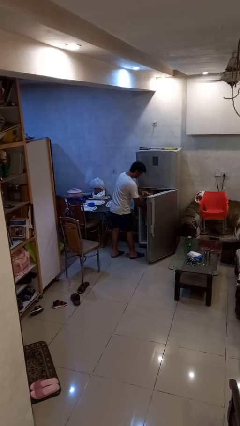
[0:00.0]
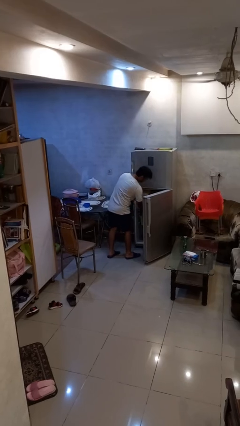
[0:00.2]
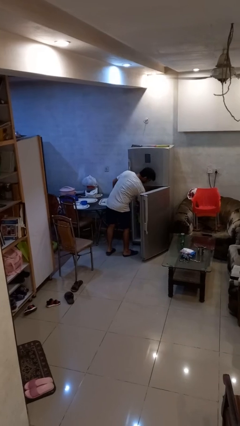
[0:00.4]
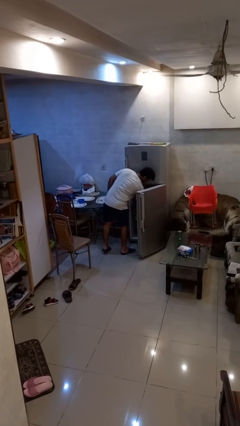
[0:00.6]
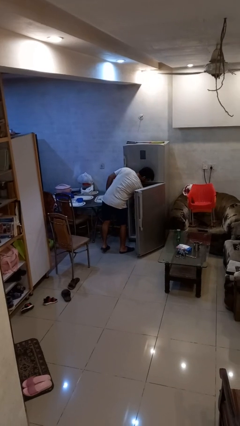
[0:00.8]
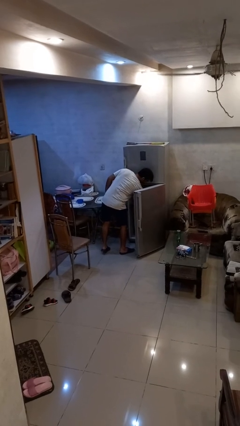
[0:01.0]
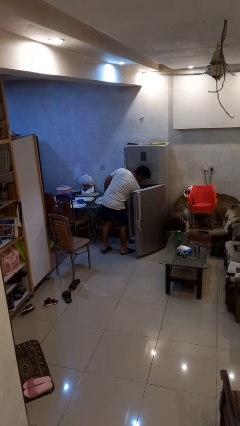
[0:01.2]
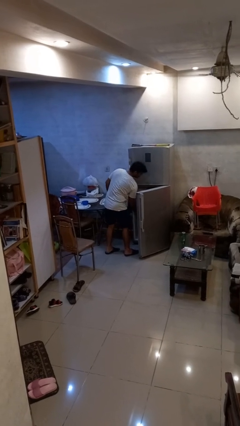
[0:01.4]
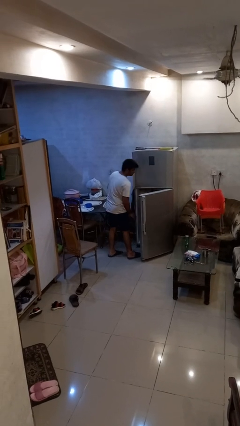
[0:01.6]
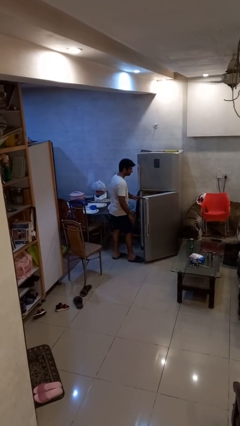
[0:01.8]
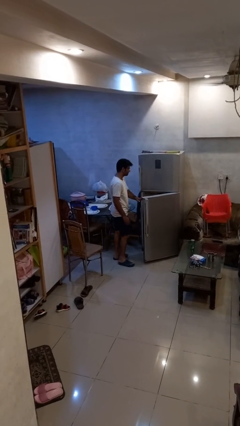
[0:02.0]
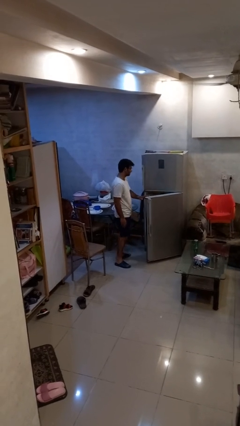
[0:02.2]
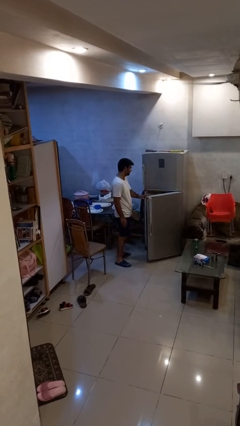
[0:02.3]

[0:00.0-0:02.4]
person puts object into refrigerator

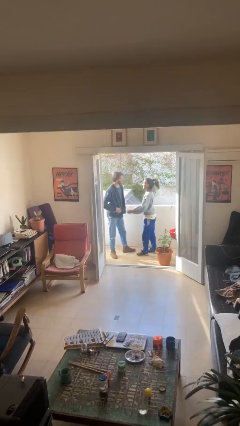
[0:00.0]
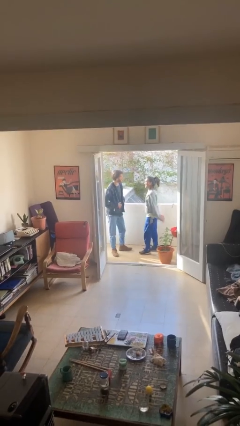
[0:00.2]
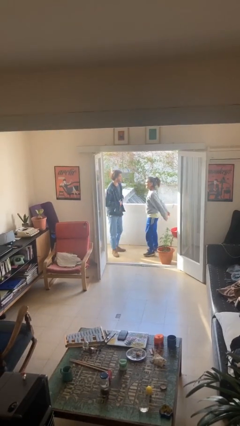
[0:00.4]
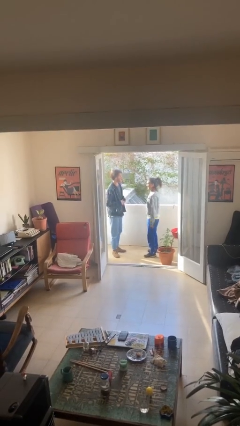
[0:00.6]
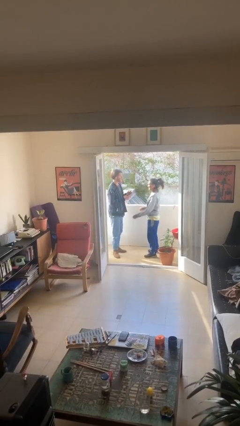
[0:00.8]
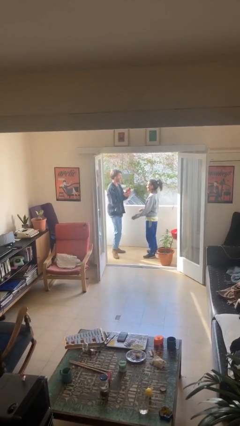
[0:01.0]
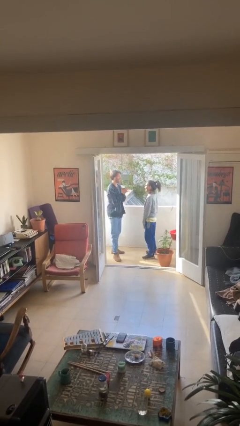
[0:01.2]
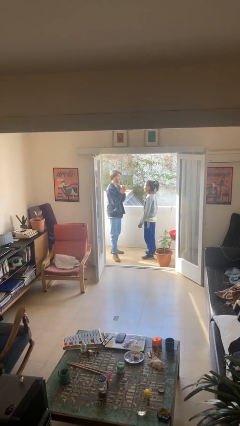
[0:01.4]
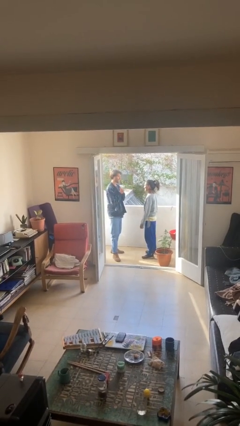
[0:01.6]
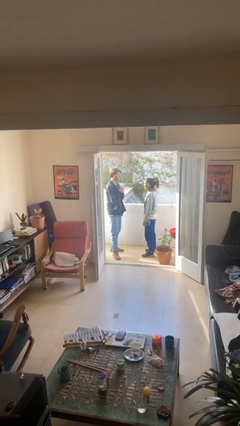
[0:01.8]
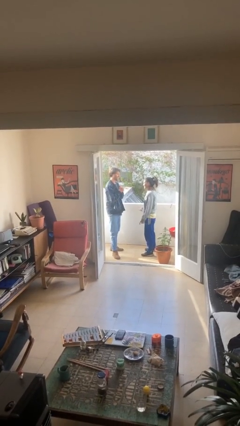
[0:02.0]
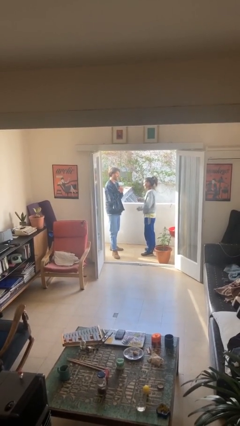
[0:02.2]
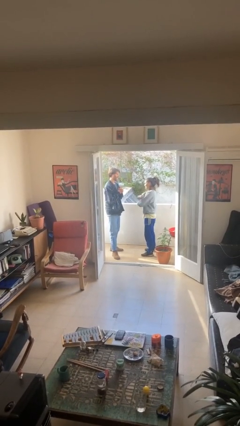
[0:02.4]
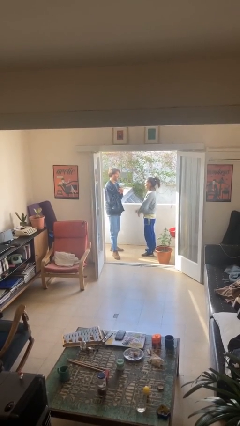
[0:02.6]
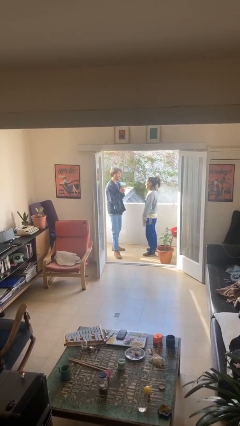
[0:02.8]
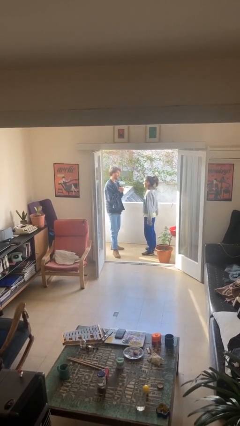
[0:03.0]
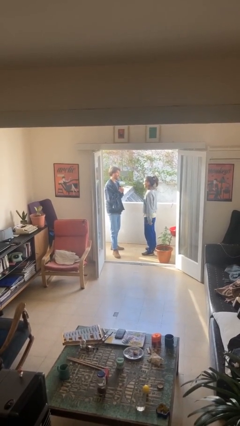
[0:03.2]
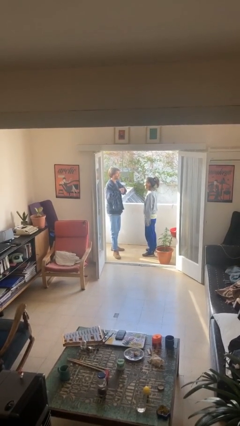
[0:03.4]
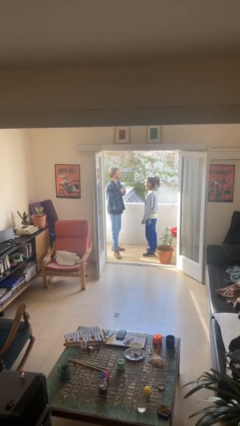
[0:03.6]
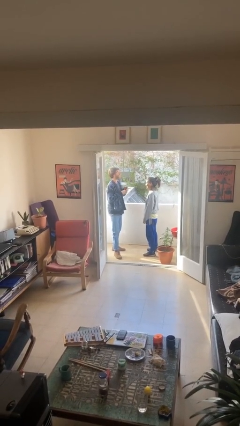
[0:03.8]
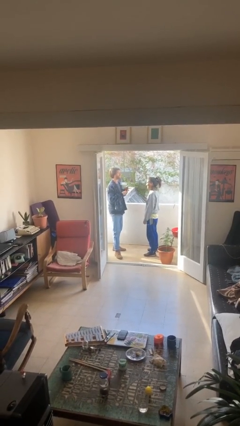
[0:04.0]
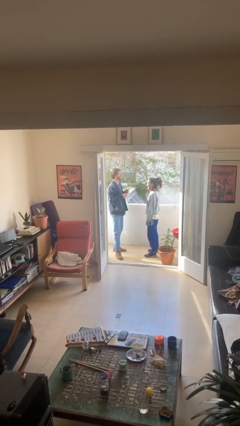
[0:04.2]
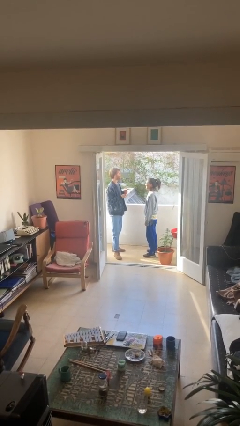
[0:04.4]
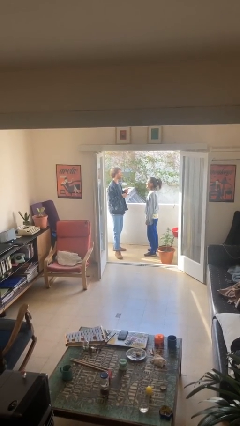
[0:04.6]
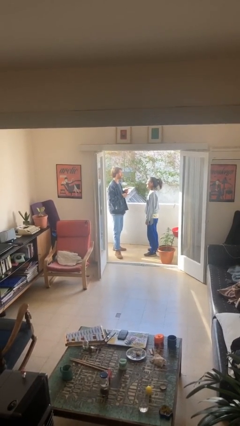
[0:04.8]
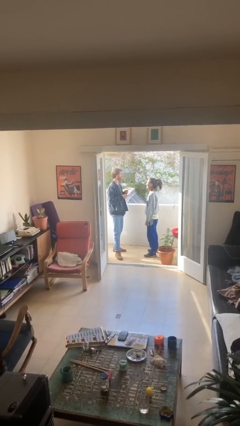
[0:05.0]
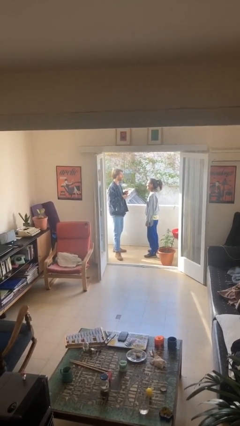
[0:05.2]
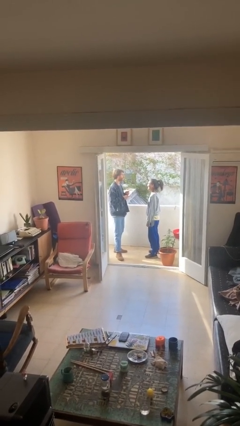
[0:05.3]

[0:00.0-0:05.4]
person talks to person

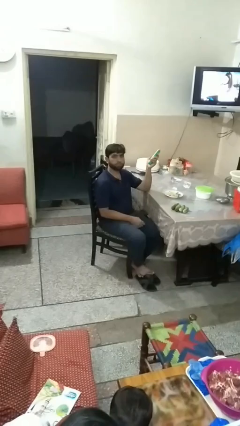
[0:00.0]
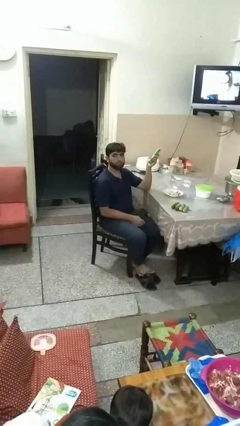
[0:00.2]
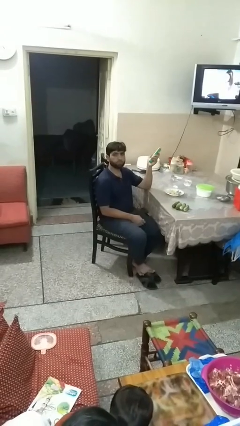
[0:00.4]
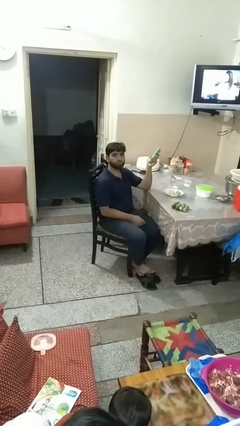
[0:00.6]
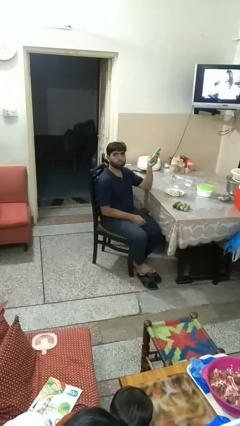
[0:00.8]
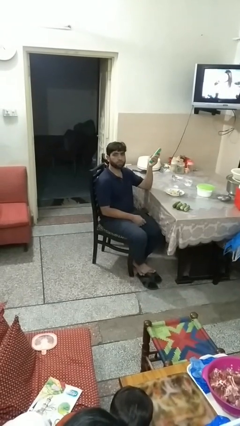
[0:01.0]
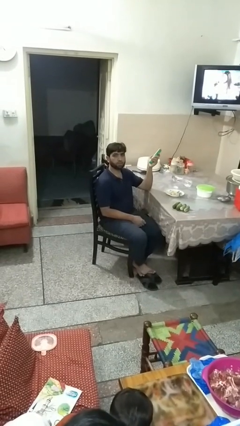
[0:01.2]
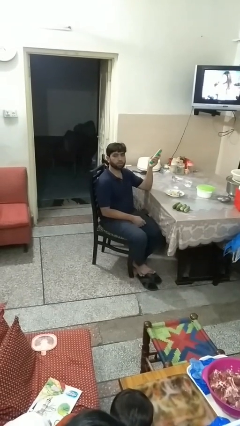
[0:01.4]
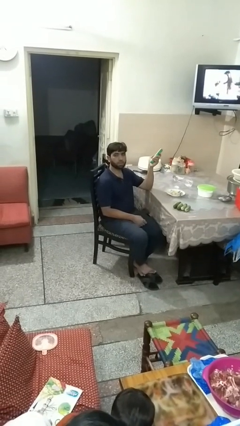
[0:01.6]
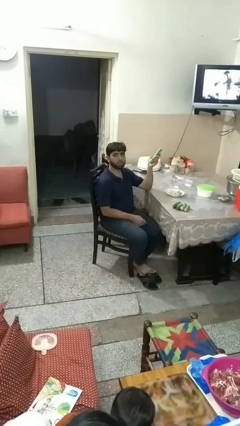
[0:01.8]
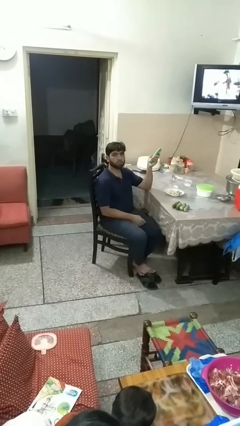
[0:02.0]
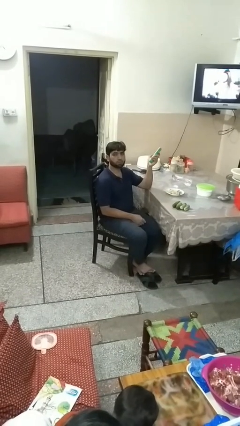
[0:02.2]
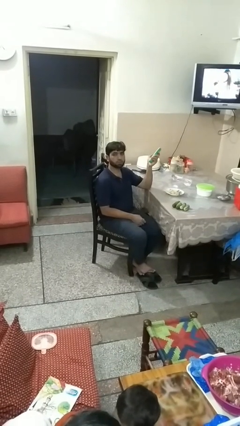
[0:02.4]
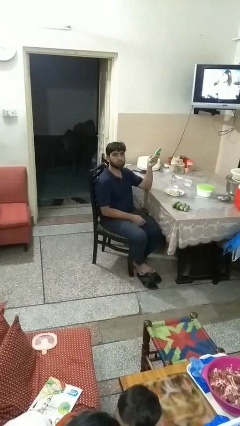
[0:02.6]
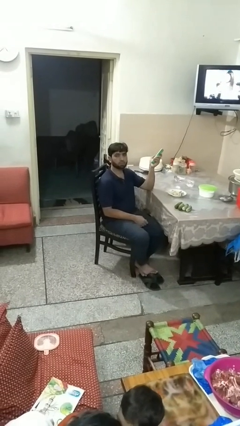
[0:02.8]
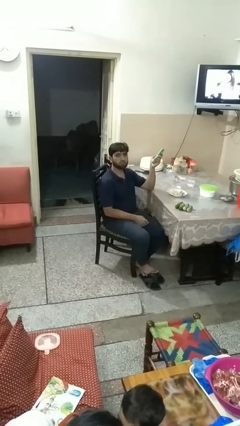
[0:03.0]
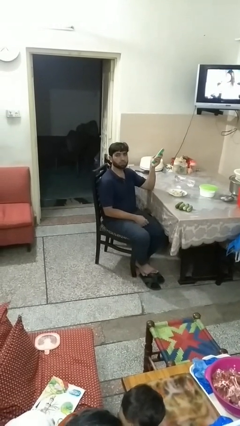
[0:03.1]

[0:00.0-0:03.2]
person uses television remote

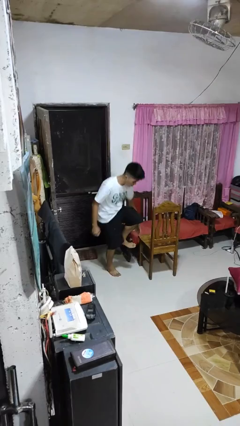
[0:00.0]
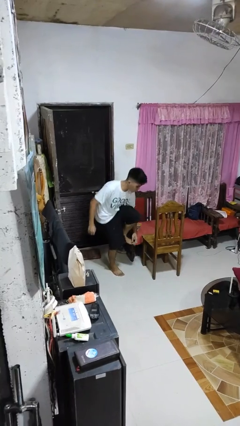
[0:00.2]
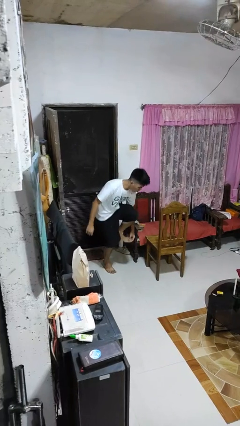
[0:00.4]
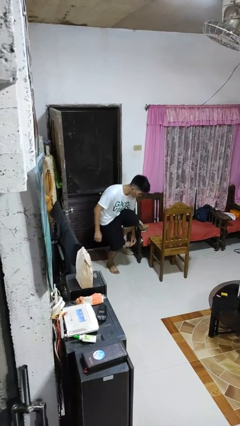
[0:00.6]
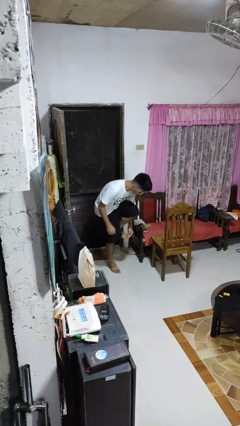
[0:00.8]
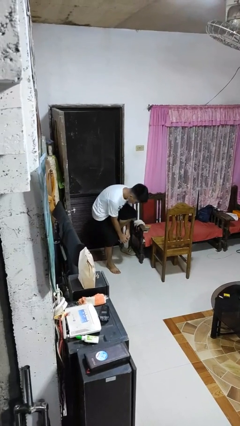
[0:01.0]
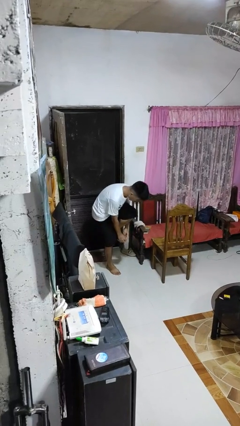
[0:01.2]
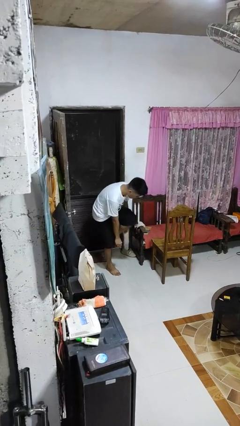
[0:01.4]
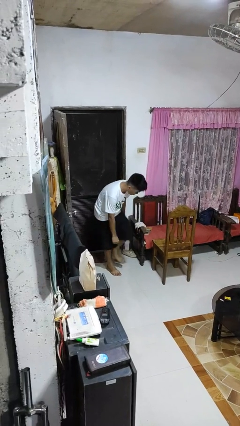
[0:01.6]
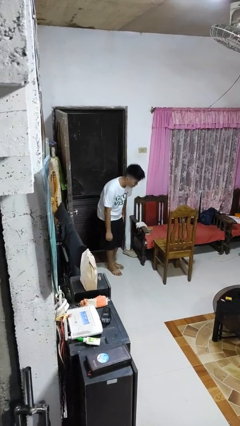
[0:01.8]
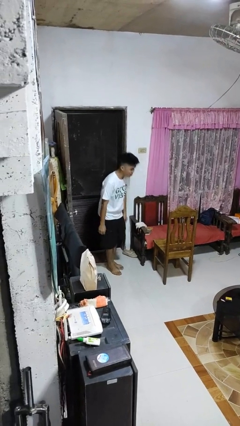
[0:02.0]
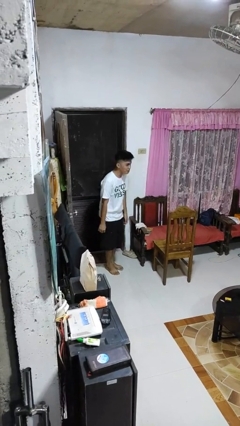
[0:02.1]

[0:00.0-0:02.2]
person stubs toe

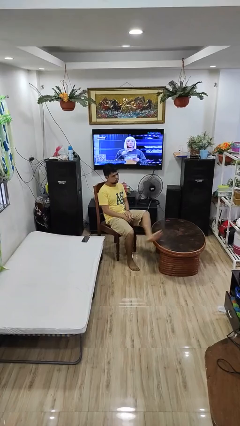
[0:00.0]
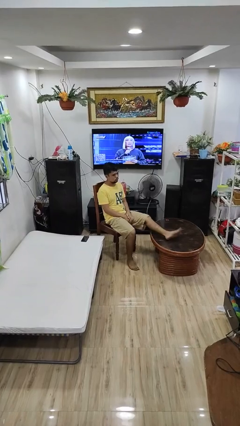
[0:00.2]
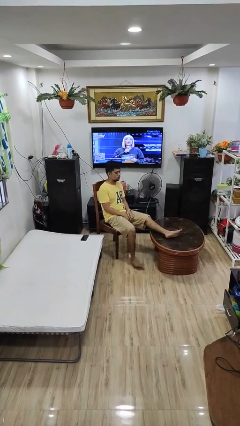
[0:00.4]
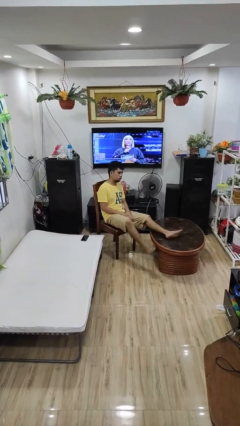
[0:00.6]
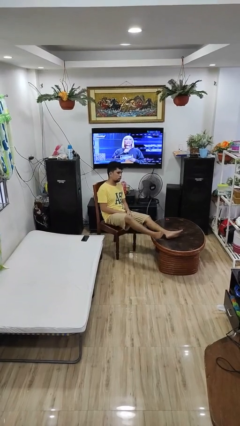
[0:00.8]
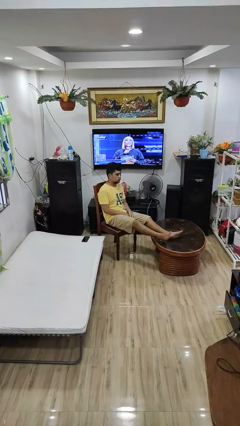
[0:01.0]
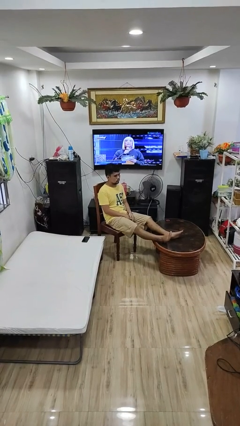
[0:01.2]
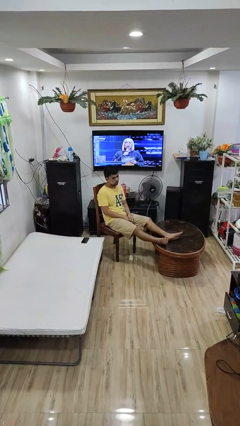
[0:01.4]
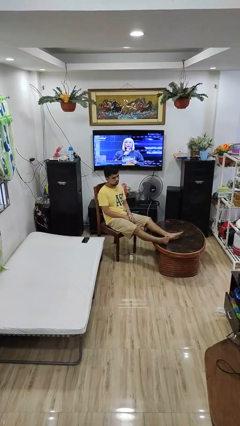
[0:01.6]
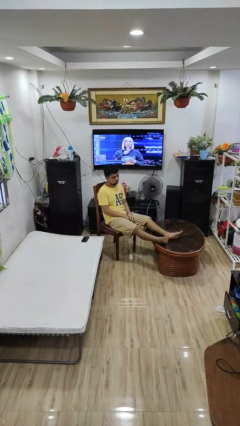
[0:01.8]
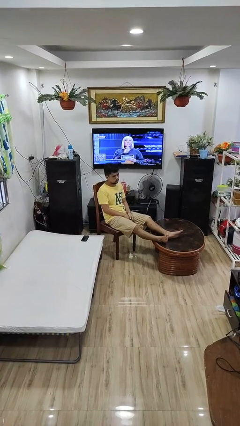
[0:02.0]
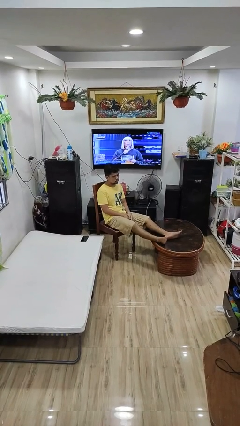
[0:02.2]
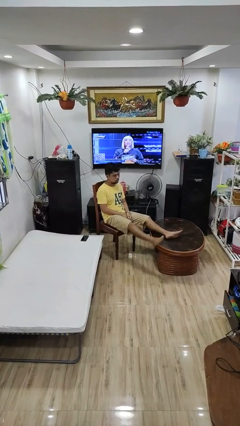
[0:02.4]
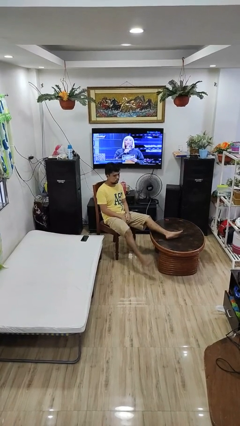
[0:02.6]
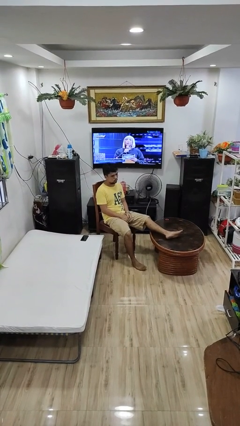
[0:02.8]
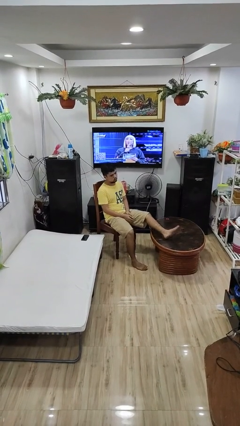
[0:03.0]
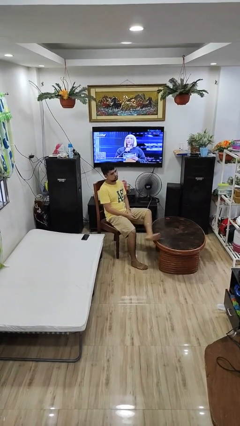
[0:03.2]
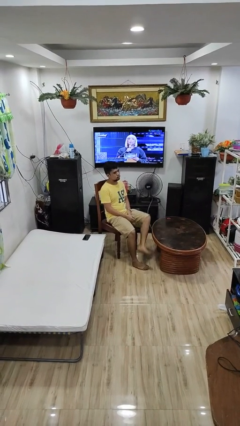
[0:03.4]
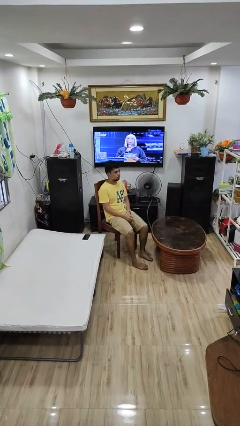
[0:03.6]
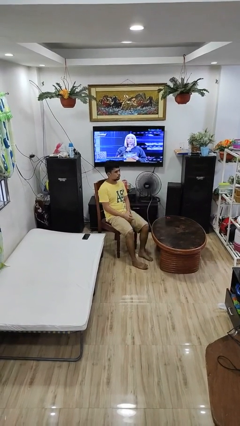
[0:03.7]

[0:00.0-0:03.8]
person puts feet up

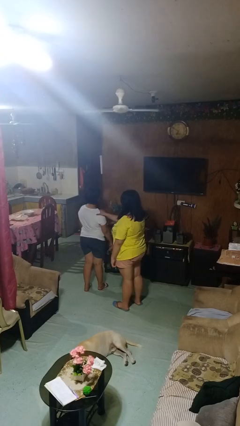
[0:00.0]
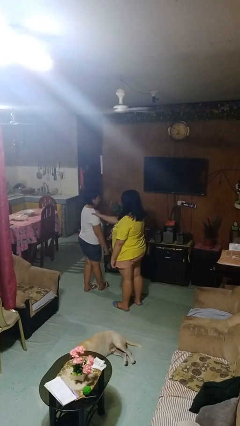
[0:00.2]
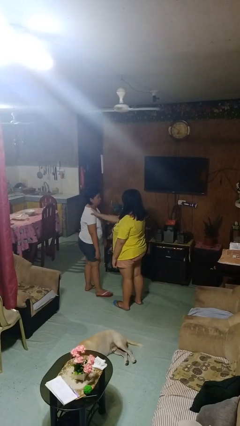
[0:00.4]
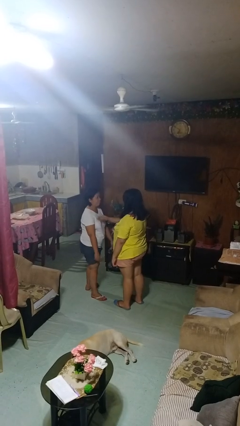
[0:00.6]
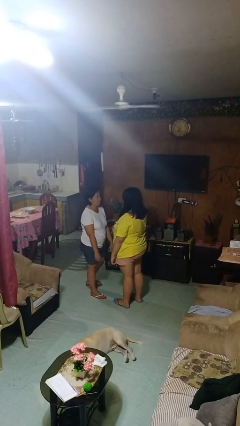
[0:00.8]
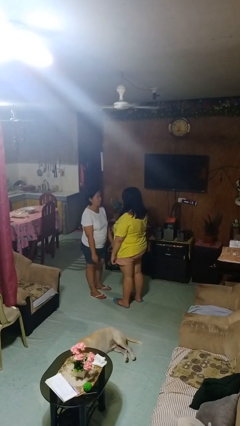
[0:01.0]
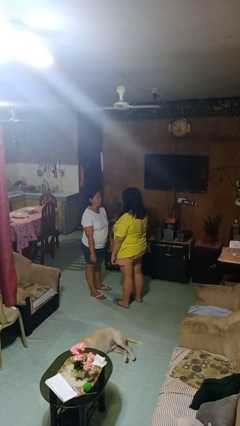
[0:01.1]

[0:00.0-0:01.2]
person spins person around
